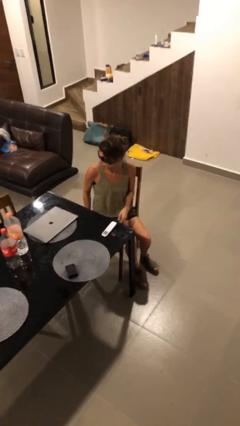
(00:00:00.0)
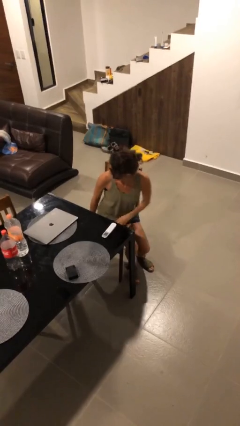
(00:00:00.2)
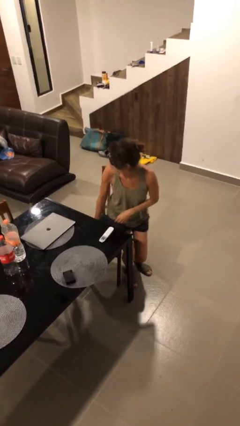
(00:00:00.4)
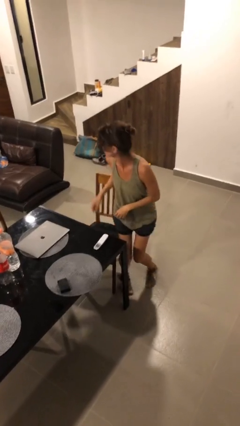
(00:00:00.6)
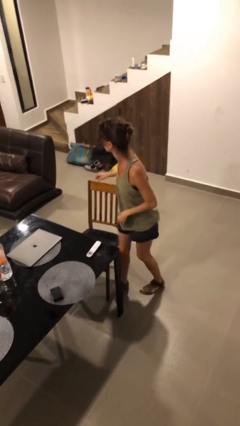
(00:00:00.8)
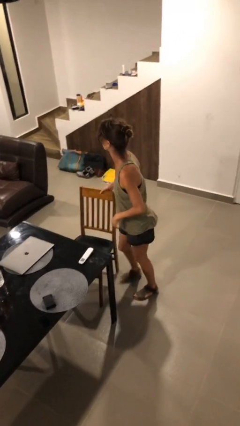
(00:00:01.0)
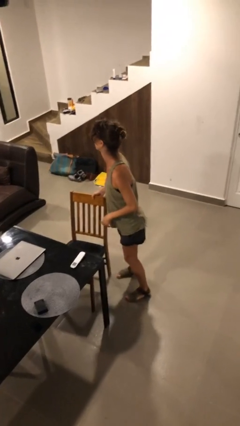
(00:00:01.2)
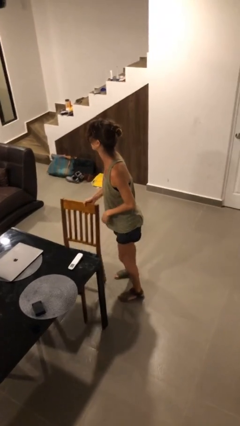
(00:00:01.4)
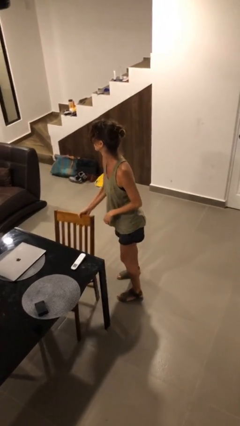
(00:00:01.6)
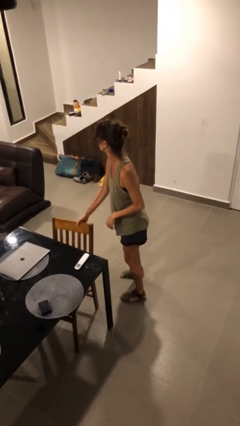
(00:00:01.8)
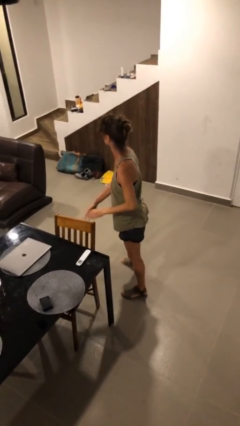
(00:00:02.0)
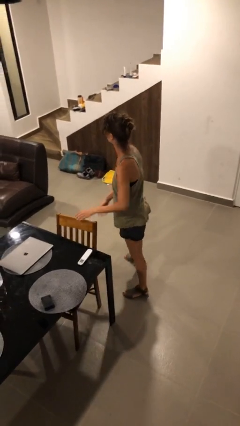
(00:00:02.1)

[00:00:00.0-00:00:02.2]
person stands up

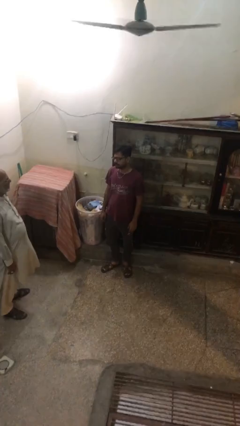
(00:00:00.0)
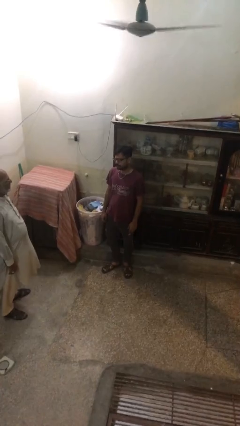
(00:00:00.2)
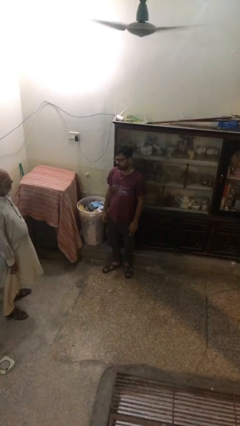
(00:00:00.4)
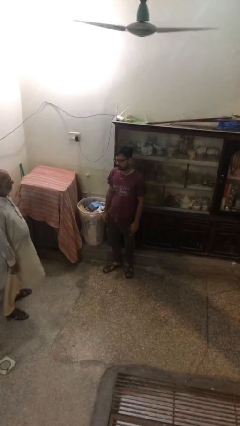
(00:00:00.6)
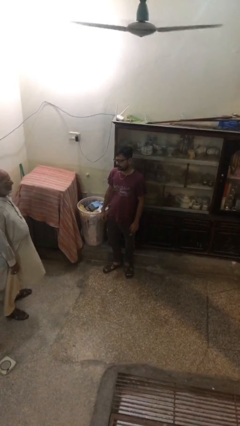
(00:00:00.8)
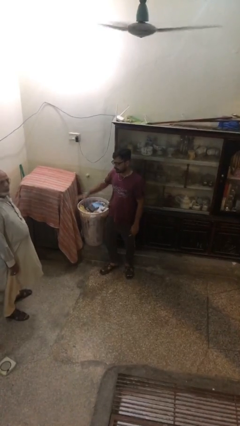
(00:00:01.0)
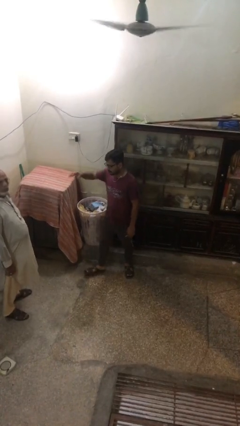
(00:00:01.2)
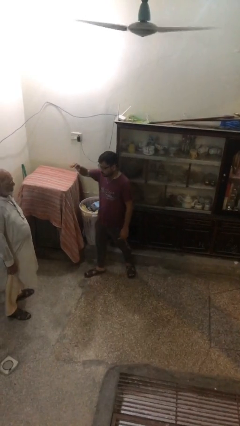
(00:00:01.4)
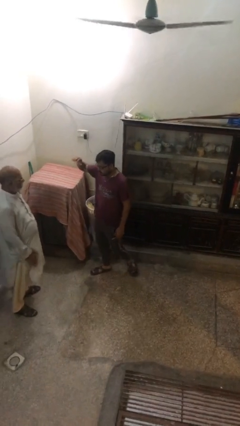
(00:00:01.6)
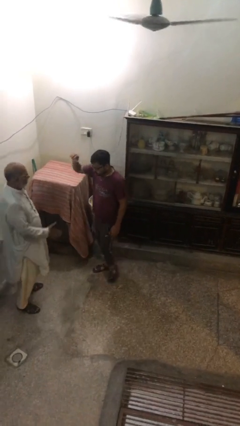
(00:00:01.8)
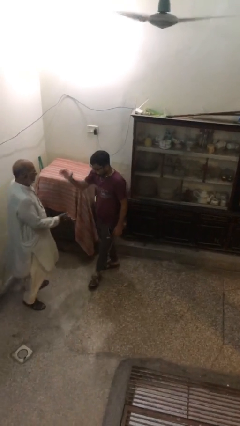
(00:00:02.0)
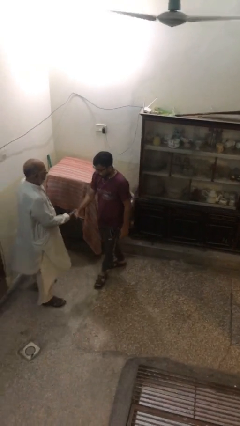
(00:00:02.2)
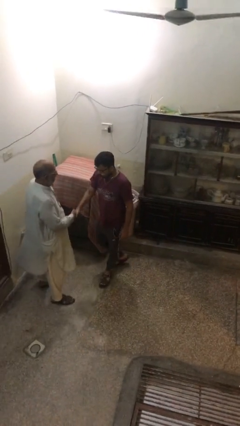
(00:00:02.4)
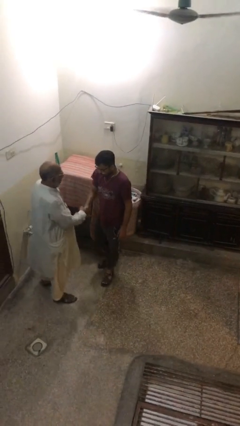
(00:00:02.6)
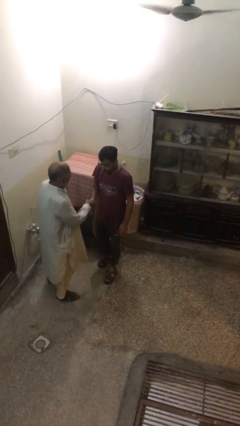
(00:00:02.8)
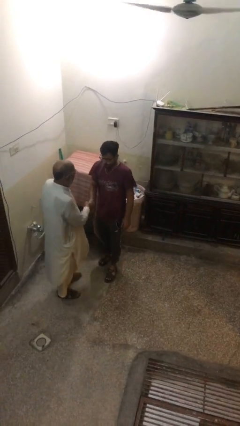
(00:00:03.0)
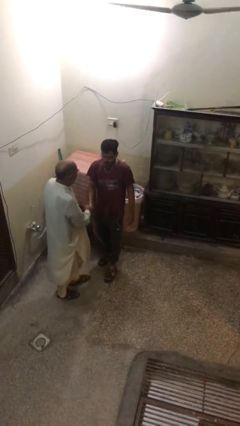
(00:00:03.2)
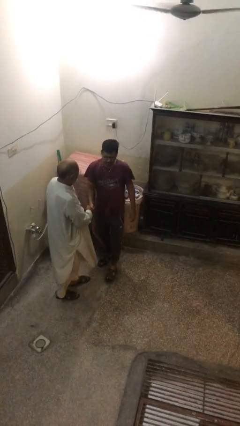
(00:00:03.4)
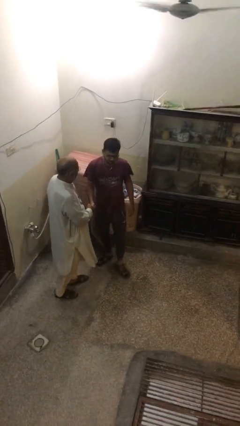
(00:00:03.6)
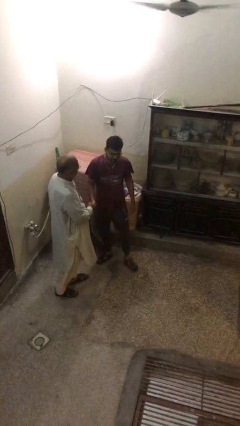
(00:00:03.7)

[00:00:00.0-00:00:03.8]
person shakes hand

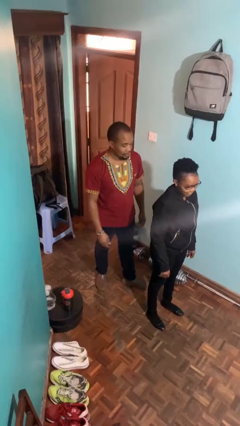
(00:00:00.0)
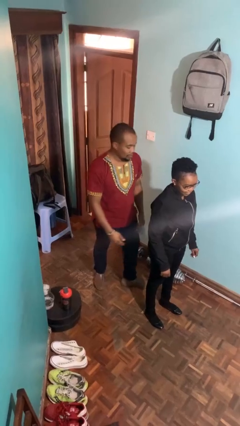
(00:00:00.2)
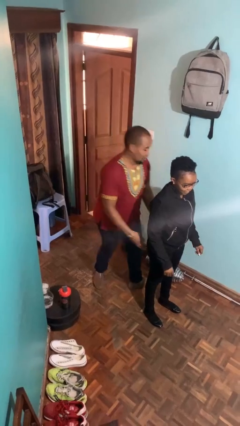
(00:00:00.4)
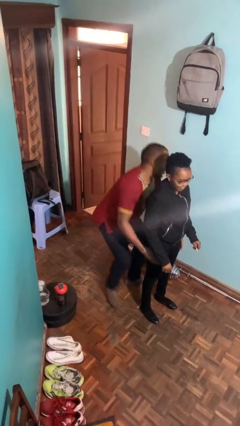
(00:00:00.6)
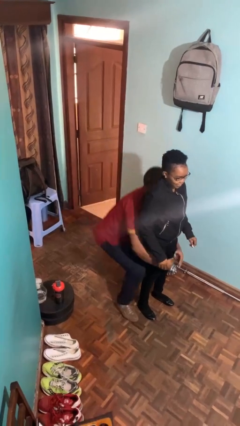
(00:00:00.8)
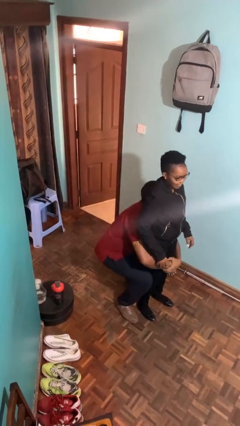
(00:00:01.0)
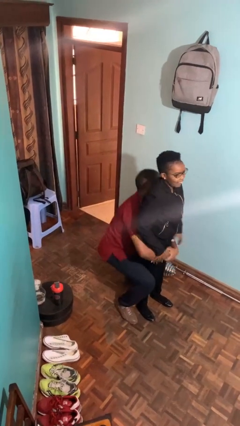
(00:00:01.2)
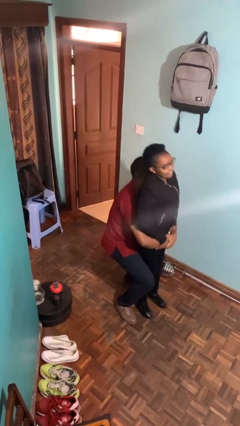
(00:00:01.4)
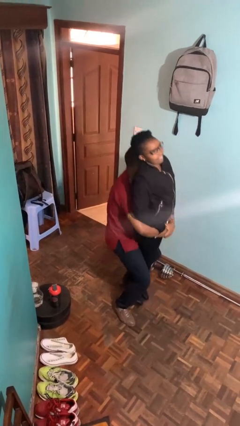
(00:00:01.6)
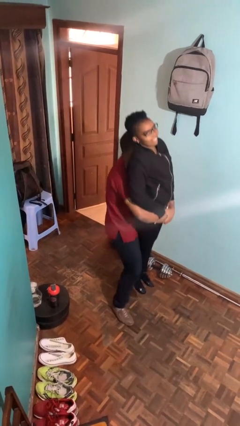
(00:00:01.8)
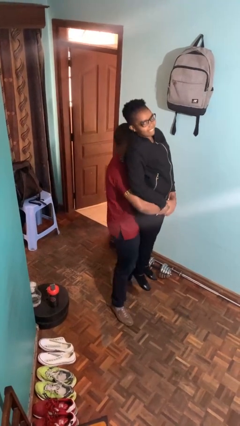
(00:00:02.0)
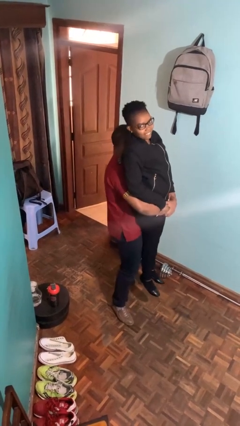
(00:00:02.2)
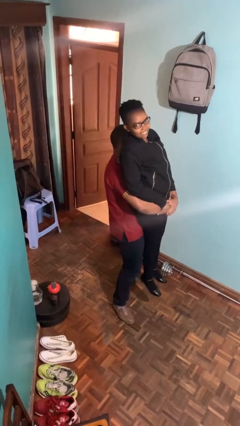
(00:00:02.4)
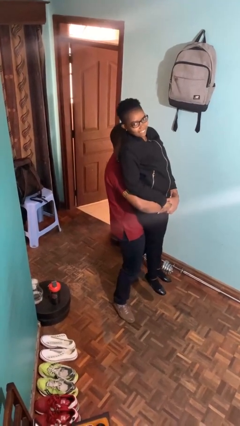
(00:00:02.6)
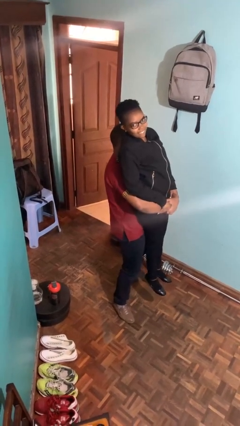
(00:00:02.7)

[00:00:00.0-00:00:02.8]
person picks up person

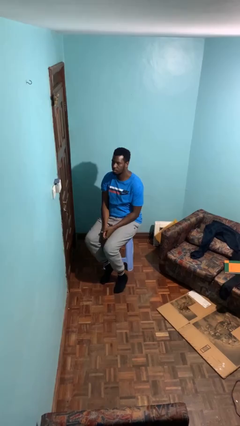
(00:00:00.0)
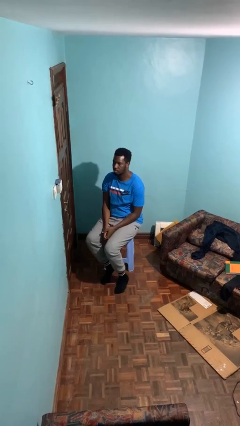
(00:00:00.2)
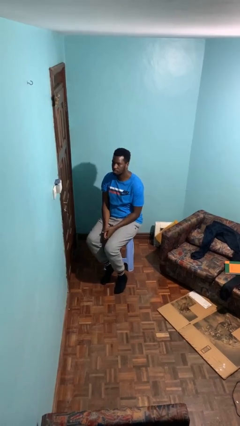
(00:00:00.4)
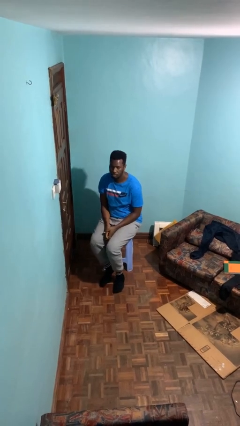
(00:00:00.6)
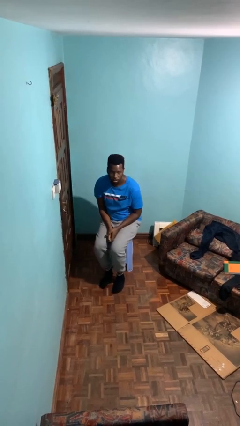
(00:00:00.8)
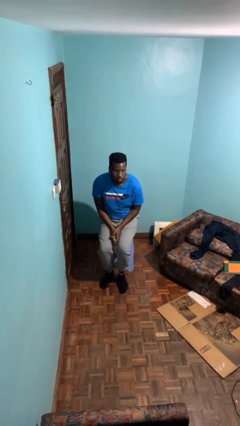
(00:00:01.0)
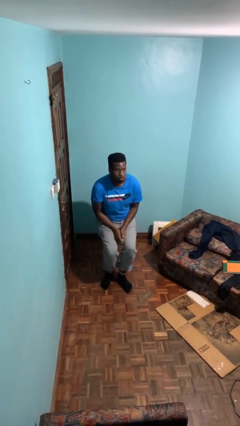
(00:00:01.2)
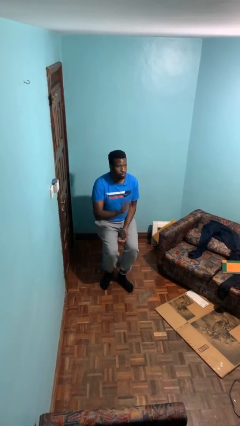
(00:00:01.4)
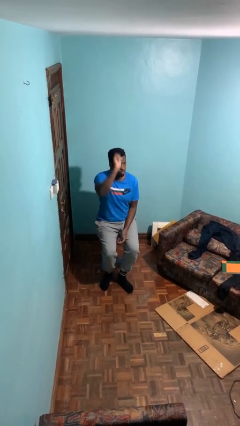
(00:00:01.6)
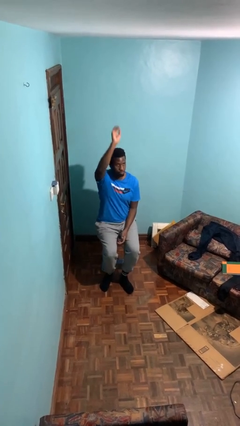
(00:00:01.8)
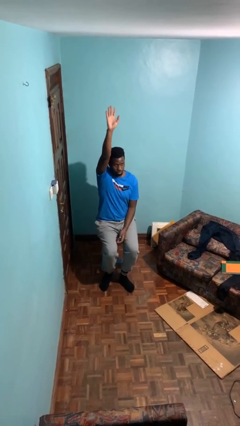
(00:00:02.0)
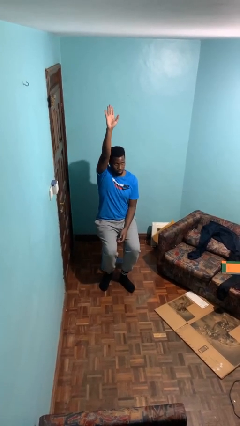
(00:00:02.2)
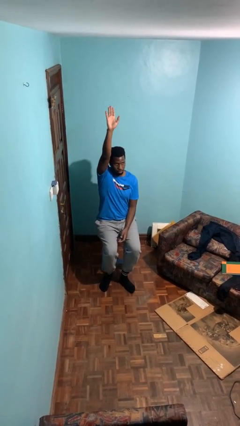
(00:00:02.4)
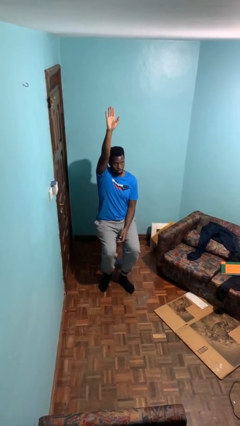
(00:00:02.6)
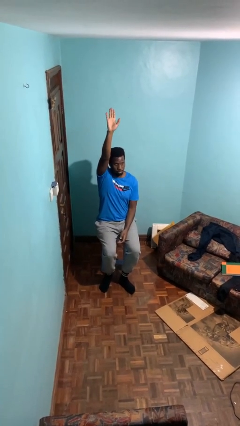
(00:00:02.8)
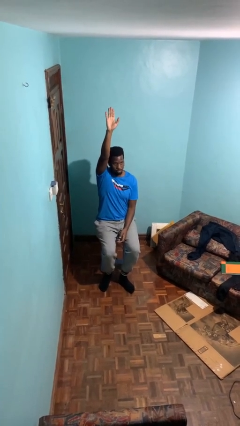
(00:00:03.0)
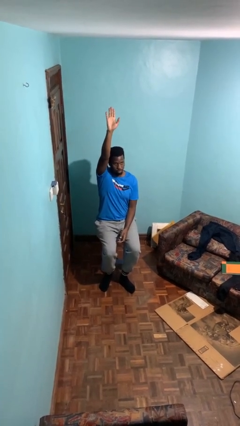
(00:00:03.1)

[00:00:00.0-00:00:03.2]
person gestures raise hand

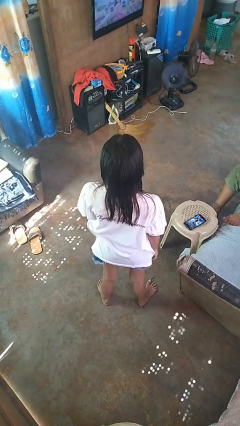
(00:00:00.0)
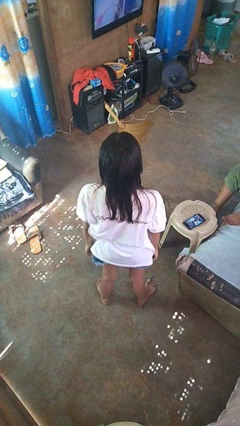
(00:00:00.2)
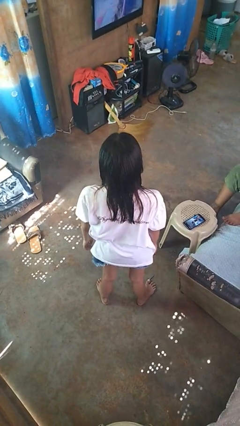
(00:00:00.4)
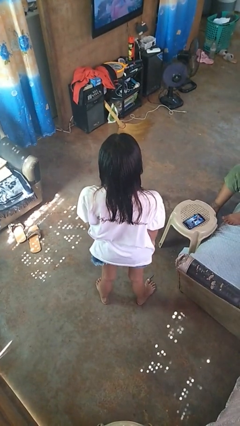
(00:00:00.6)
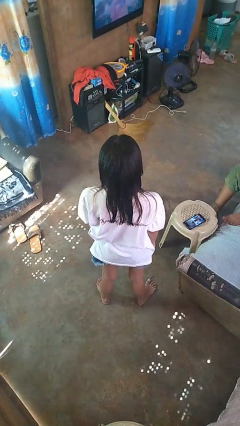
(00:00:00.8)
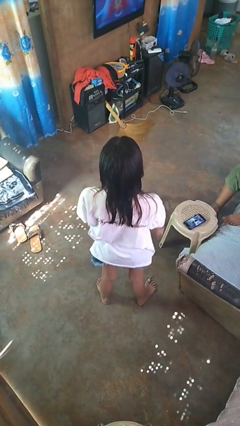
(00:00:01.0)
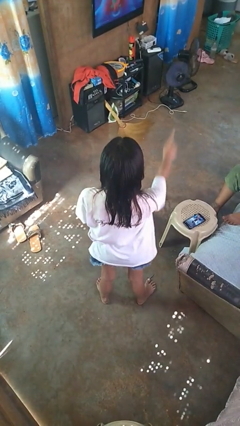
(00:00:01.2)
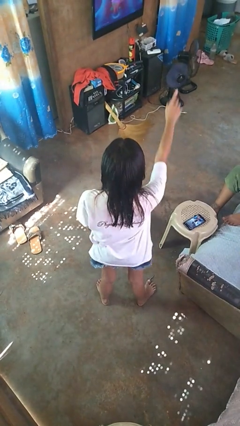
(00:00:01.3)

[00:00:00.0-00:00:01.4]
person gestures number three

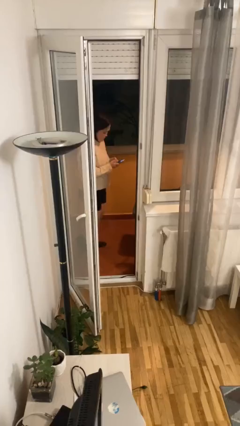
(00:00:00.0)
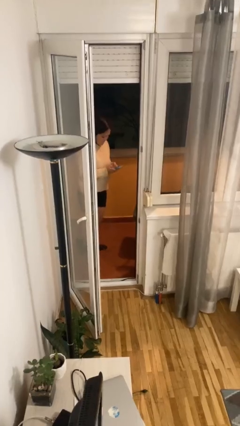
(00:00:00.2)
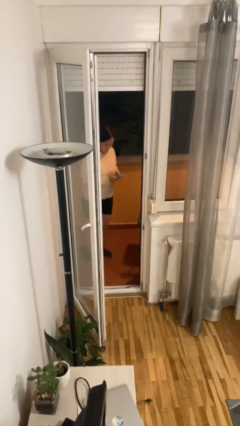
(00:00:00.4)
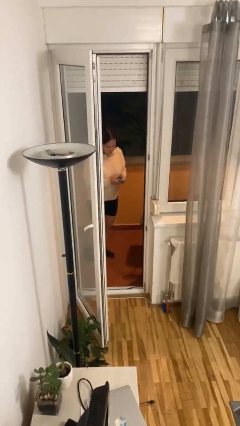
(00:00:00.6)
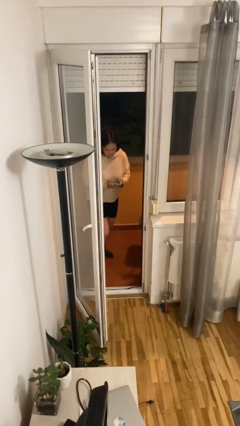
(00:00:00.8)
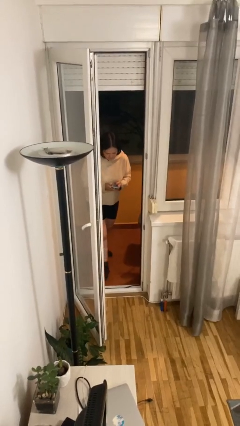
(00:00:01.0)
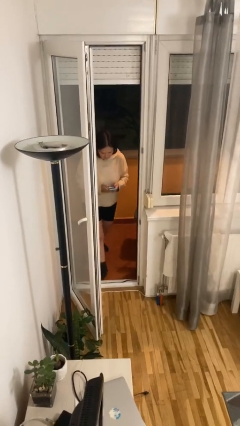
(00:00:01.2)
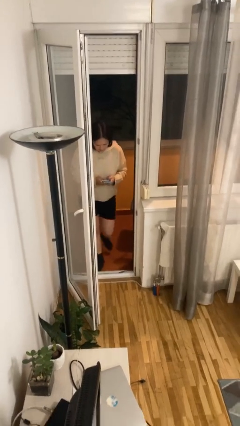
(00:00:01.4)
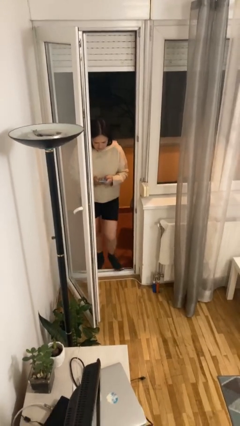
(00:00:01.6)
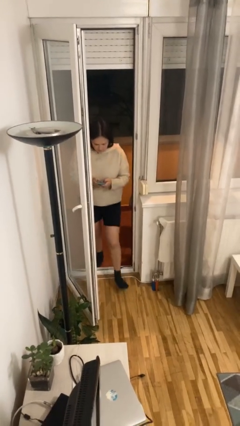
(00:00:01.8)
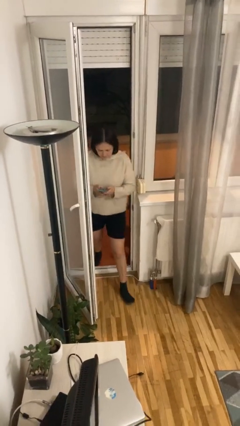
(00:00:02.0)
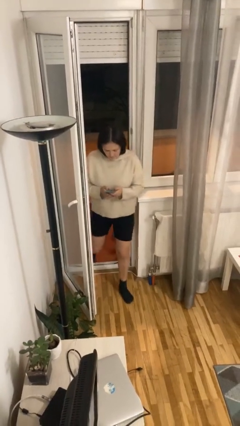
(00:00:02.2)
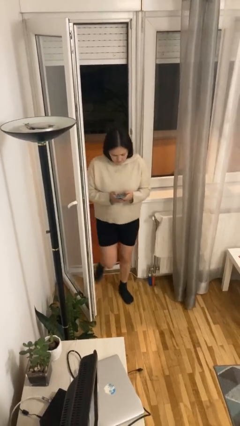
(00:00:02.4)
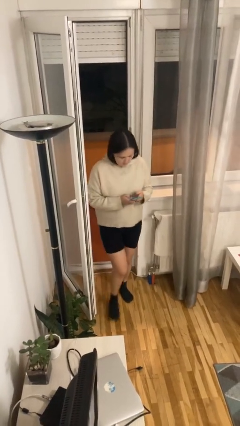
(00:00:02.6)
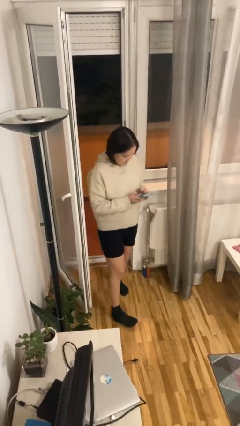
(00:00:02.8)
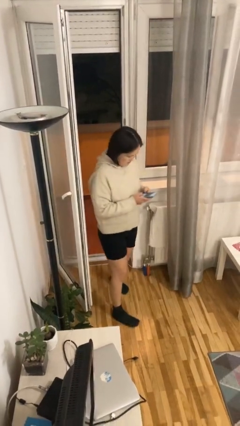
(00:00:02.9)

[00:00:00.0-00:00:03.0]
person enters scene through structure

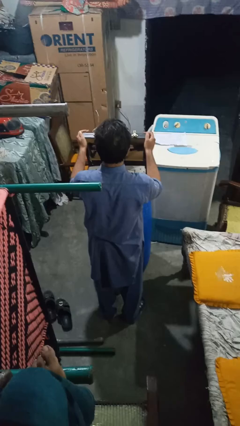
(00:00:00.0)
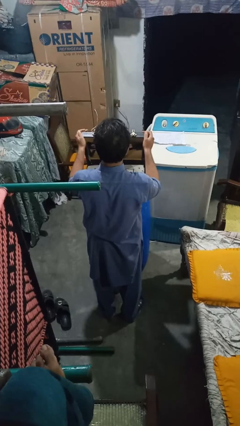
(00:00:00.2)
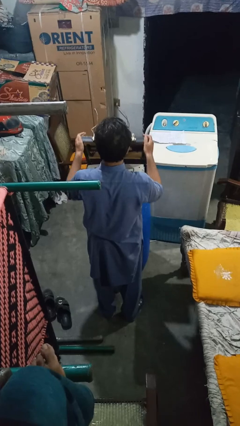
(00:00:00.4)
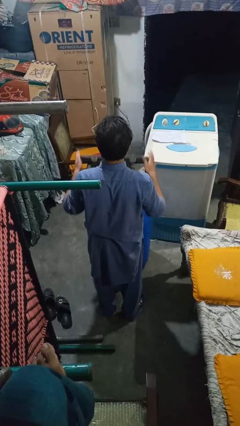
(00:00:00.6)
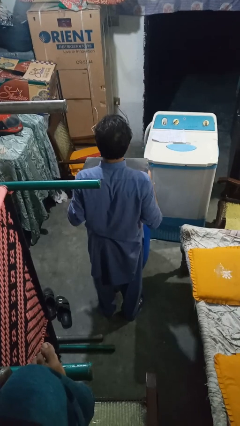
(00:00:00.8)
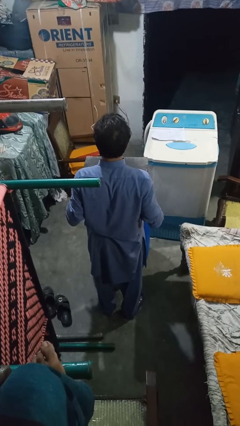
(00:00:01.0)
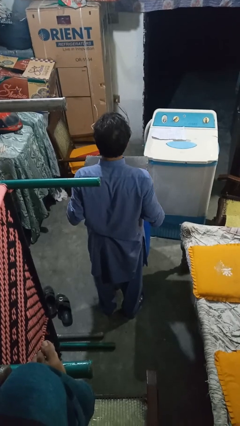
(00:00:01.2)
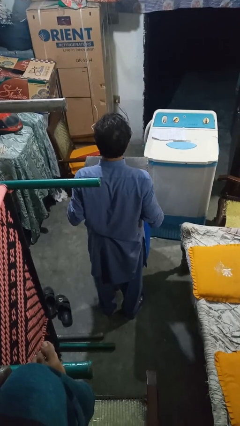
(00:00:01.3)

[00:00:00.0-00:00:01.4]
person closes suitcase
